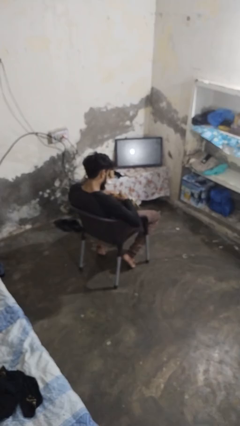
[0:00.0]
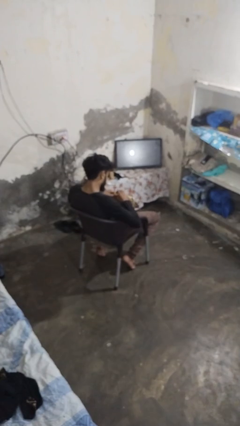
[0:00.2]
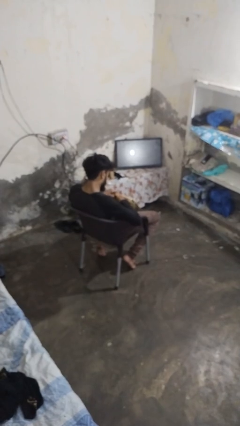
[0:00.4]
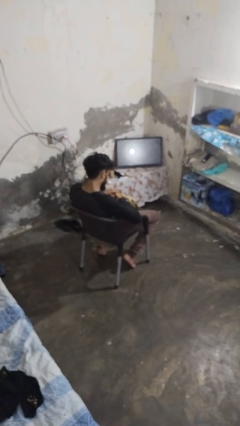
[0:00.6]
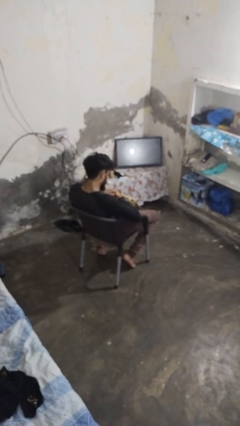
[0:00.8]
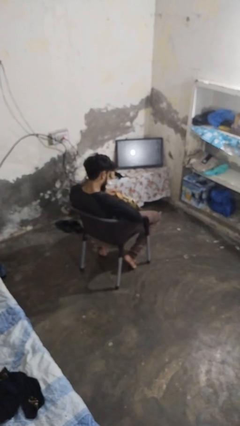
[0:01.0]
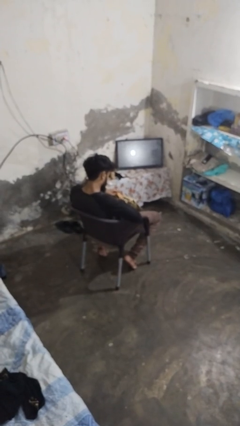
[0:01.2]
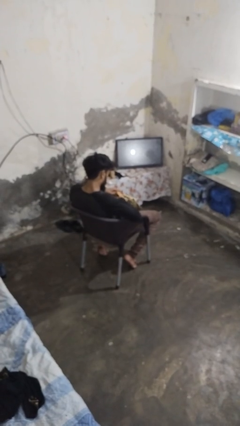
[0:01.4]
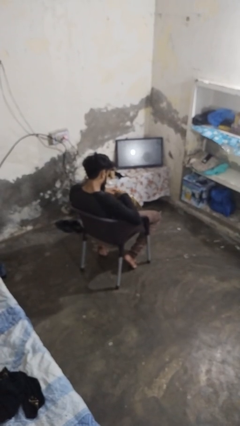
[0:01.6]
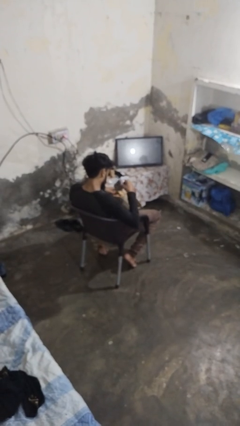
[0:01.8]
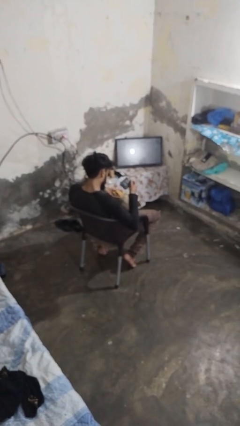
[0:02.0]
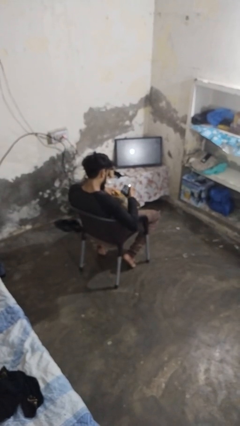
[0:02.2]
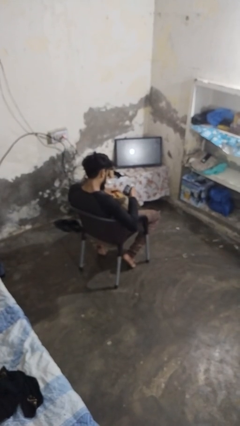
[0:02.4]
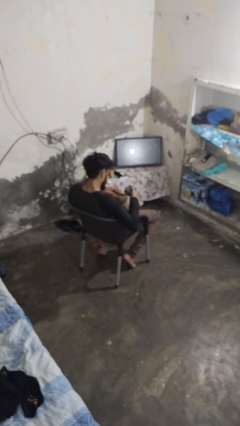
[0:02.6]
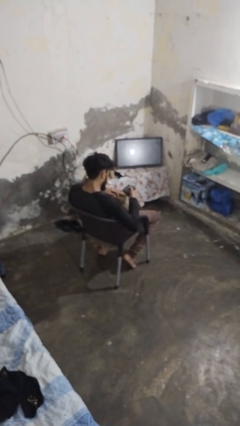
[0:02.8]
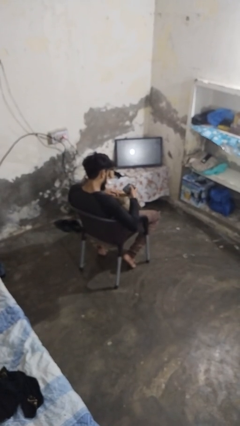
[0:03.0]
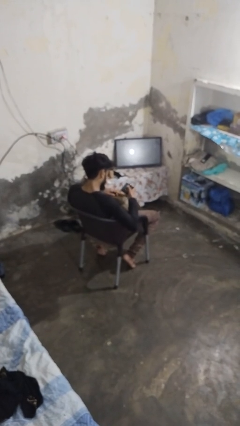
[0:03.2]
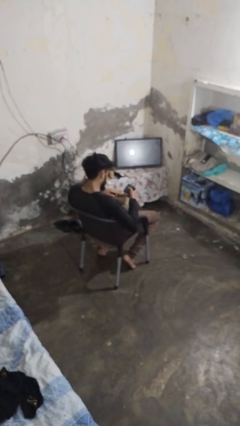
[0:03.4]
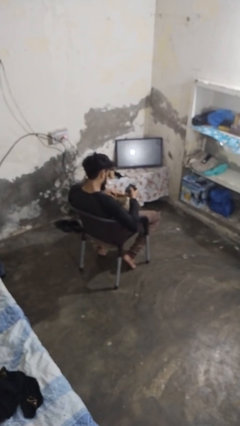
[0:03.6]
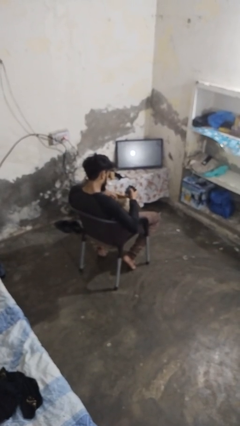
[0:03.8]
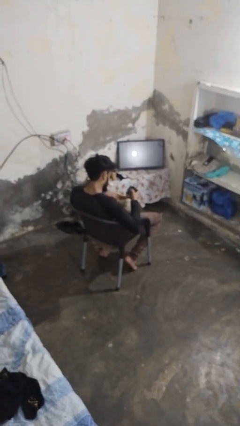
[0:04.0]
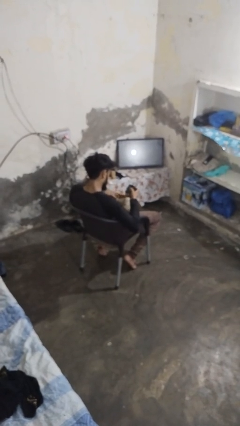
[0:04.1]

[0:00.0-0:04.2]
person takes object from purse

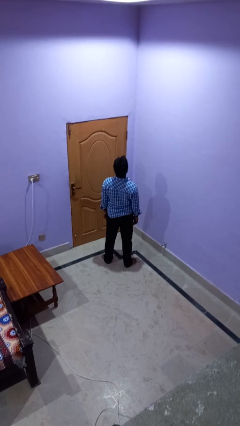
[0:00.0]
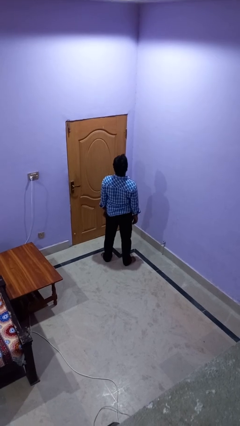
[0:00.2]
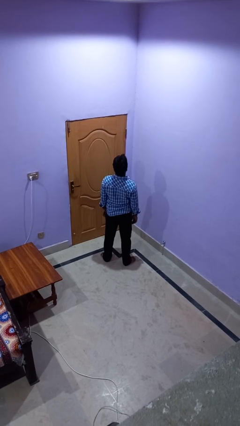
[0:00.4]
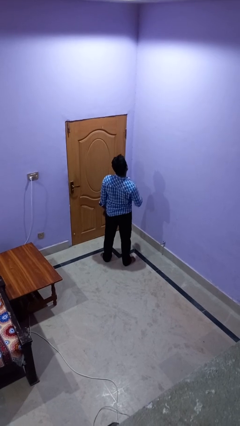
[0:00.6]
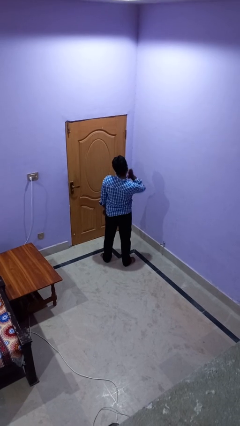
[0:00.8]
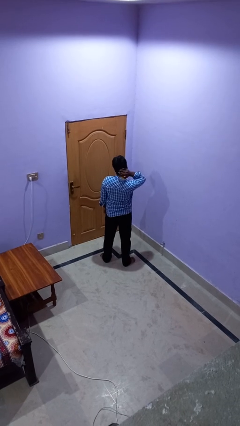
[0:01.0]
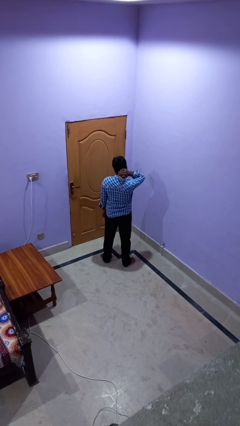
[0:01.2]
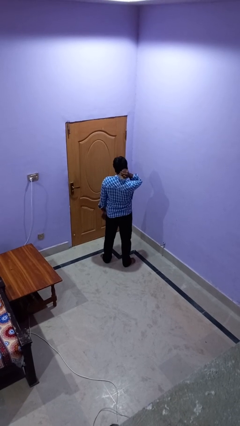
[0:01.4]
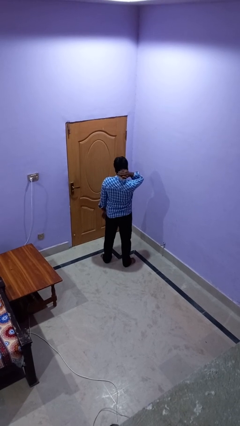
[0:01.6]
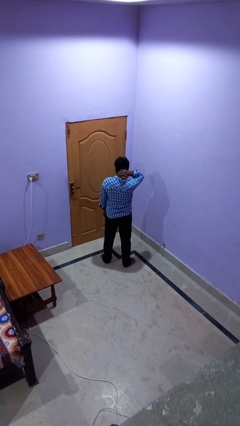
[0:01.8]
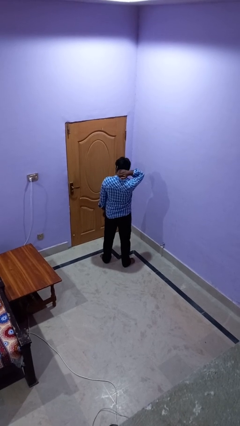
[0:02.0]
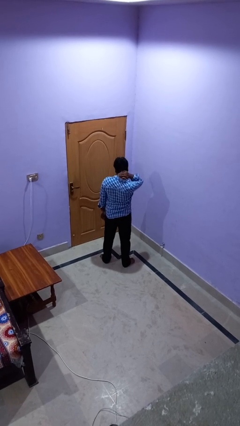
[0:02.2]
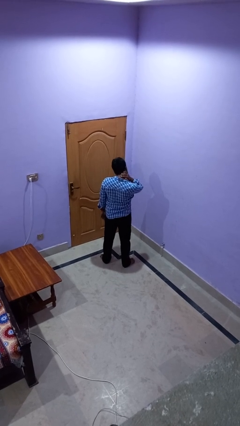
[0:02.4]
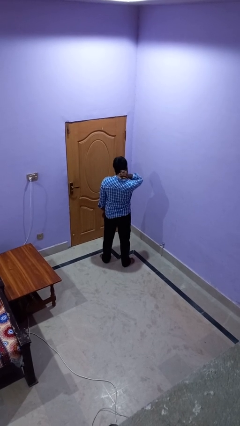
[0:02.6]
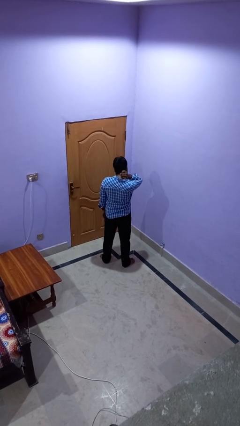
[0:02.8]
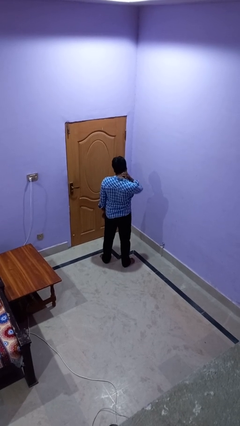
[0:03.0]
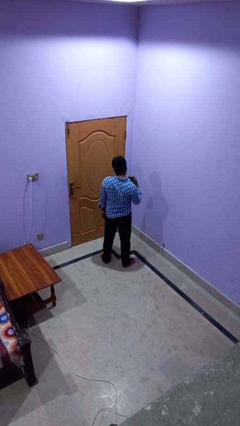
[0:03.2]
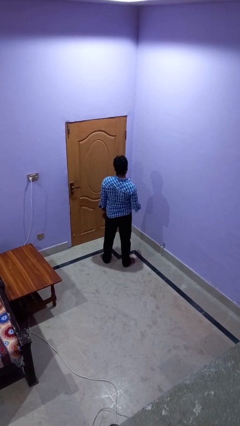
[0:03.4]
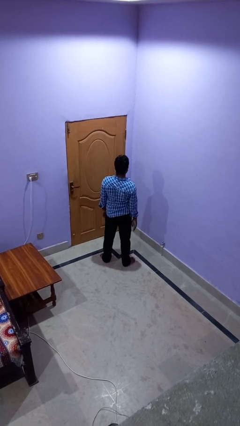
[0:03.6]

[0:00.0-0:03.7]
person rubs neck

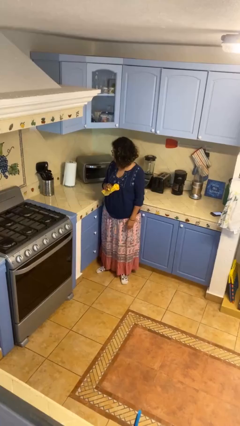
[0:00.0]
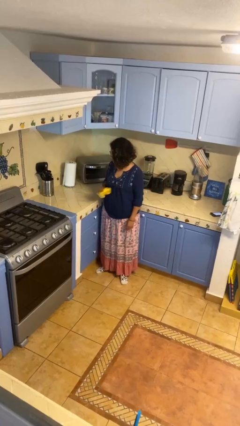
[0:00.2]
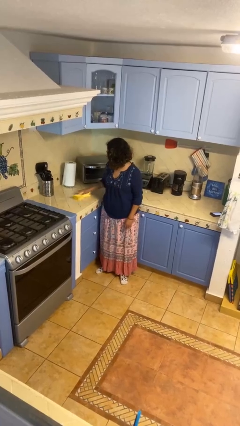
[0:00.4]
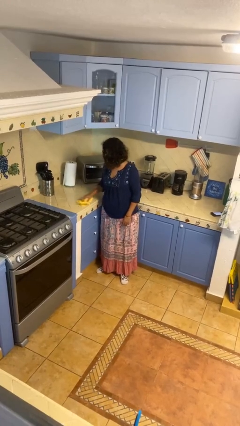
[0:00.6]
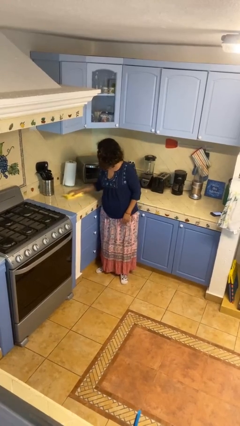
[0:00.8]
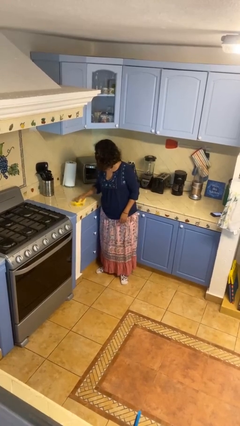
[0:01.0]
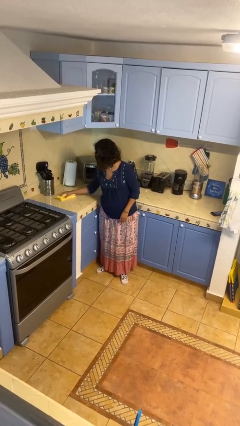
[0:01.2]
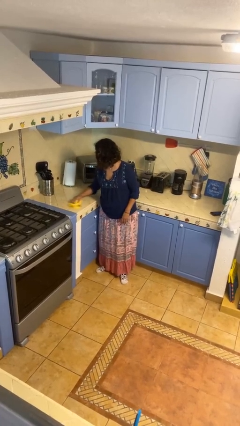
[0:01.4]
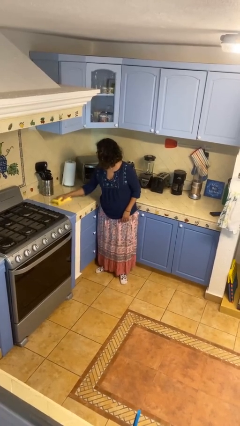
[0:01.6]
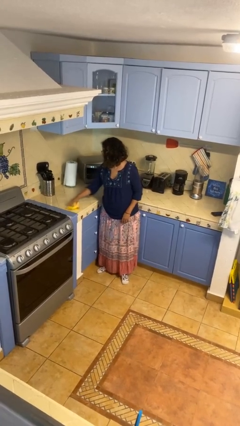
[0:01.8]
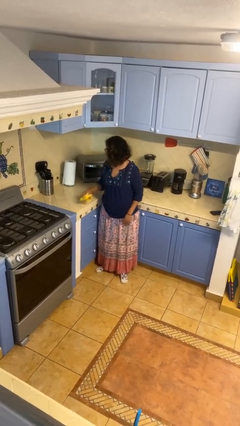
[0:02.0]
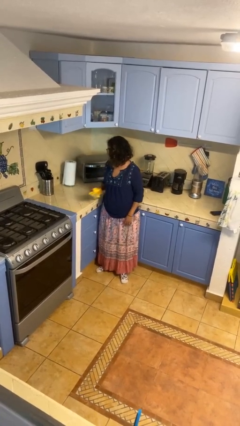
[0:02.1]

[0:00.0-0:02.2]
person cleans table with rag

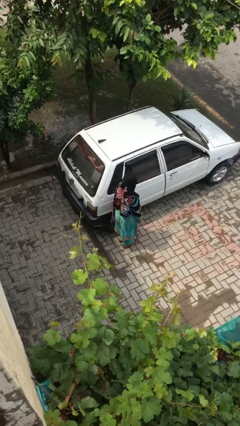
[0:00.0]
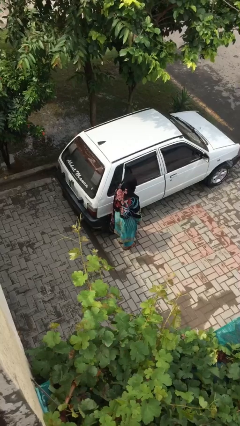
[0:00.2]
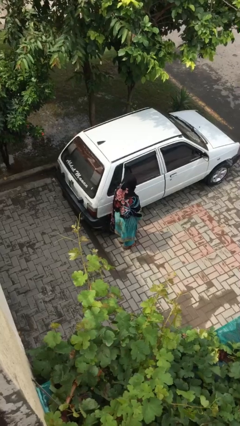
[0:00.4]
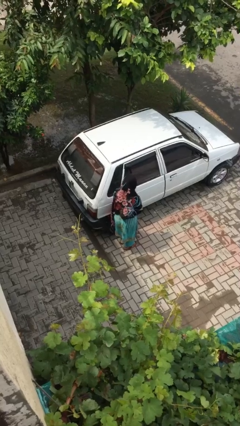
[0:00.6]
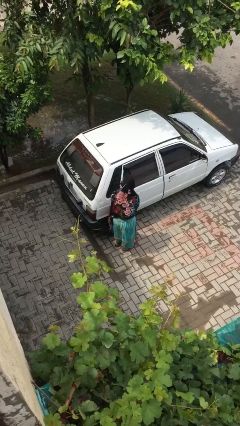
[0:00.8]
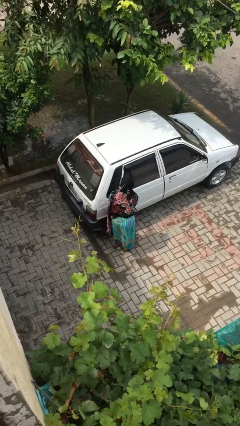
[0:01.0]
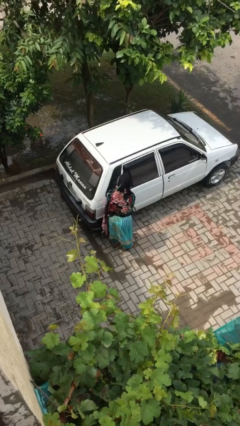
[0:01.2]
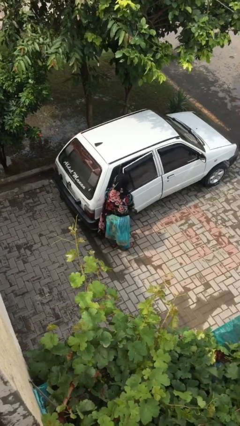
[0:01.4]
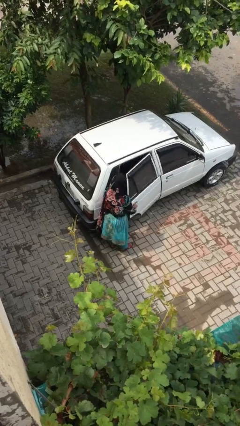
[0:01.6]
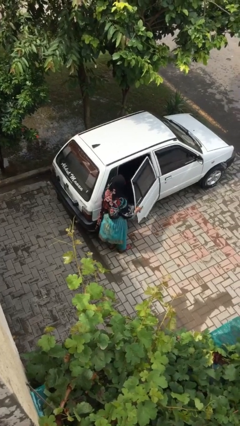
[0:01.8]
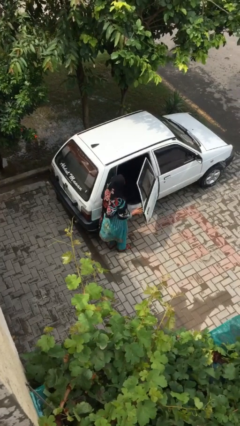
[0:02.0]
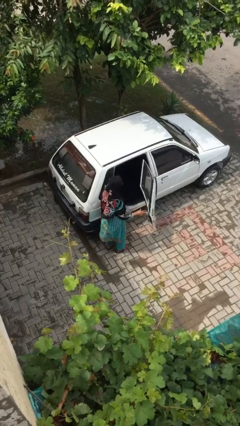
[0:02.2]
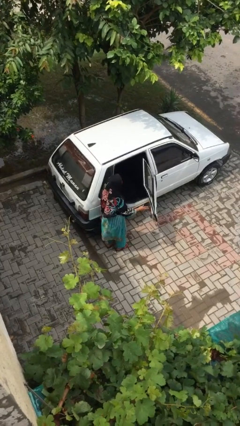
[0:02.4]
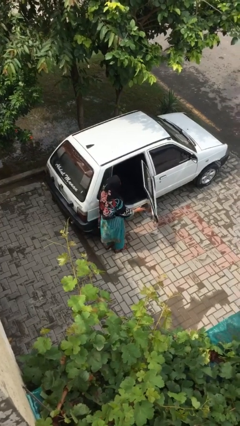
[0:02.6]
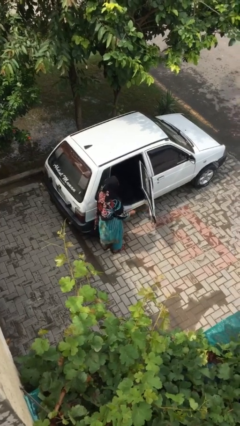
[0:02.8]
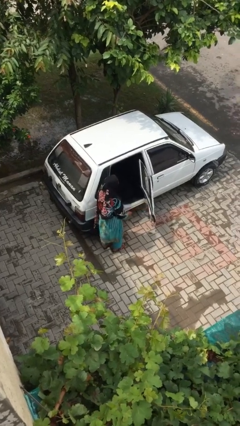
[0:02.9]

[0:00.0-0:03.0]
person opens car door

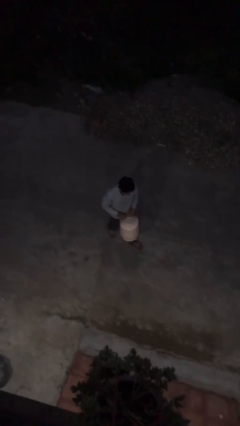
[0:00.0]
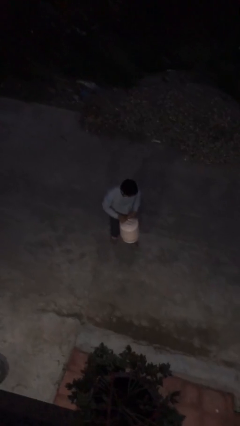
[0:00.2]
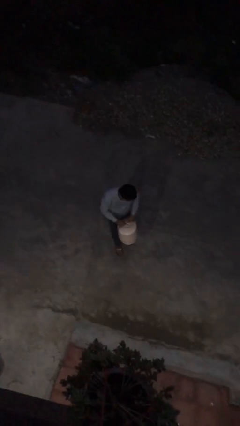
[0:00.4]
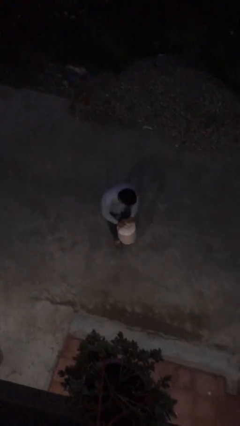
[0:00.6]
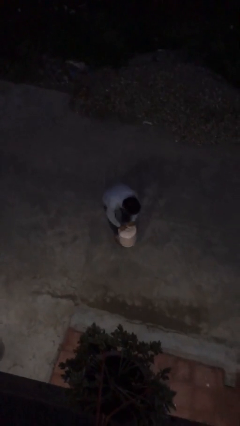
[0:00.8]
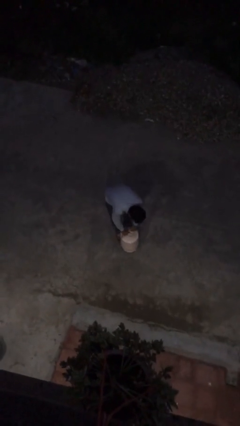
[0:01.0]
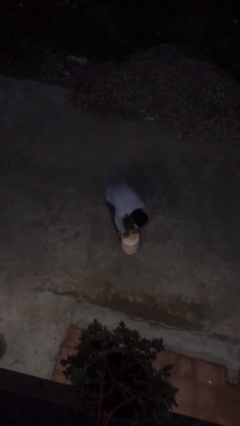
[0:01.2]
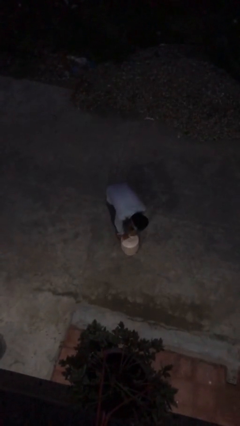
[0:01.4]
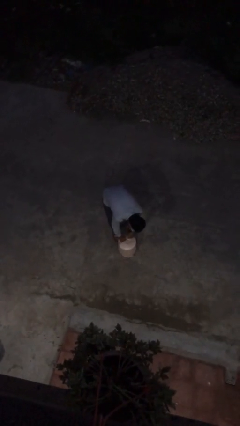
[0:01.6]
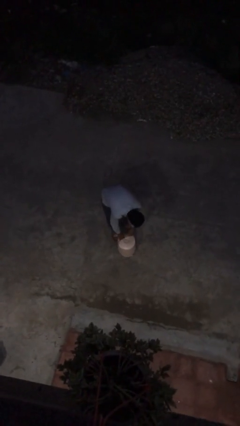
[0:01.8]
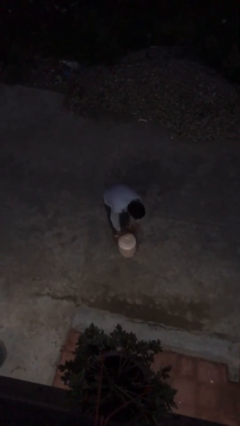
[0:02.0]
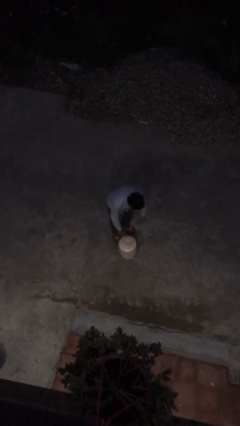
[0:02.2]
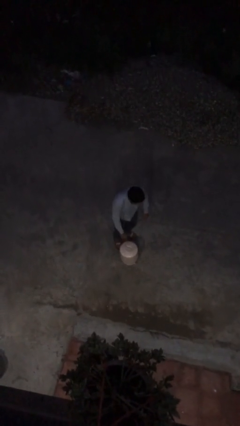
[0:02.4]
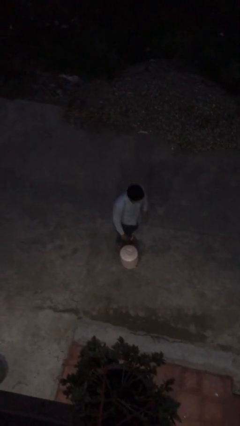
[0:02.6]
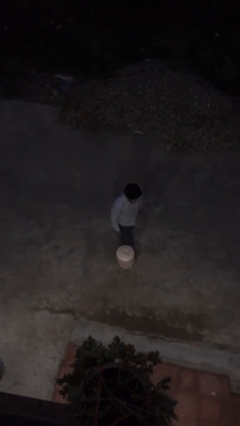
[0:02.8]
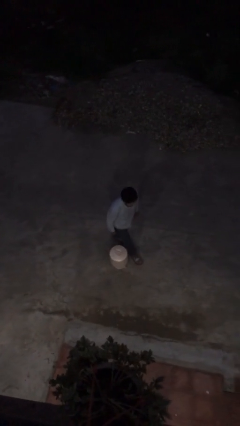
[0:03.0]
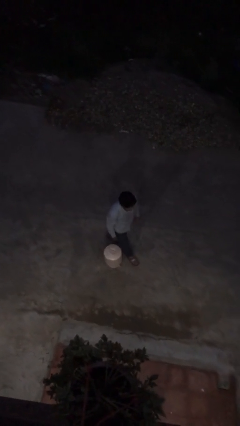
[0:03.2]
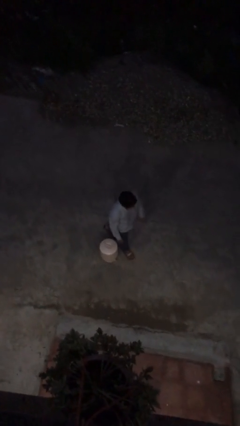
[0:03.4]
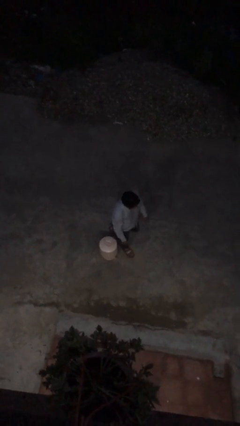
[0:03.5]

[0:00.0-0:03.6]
person puts down object on floor

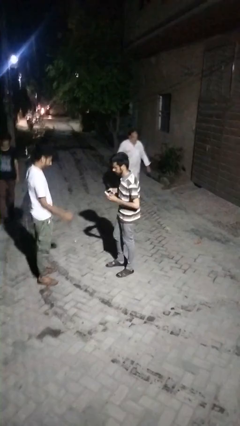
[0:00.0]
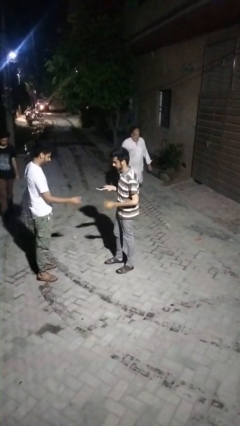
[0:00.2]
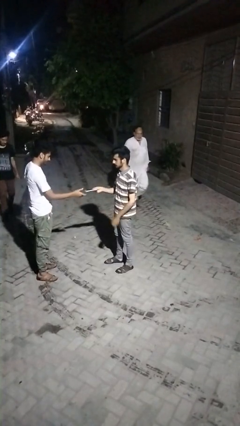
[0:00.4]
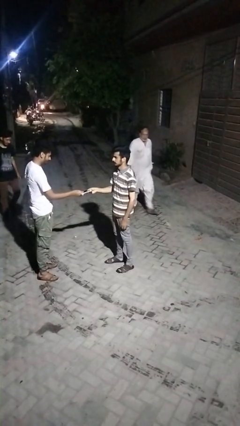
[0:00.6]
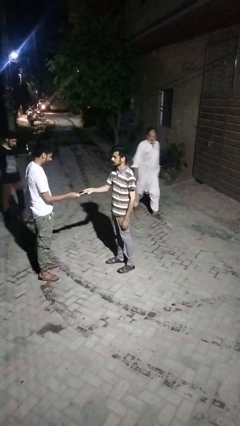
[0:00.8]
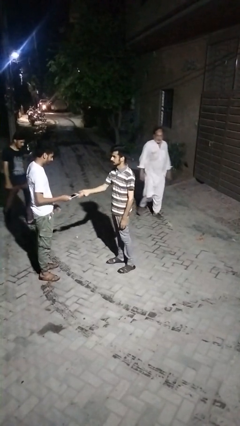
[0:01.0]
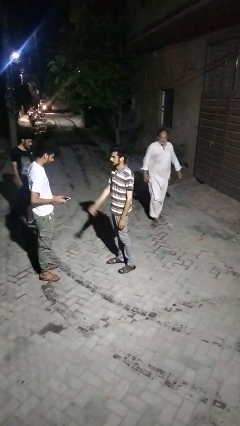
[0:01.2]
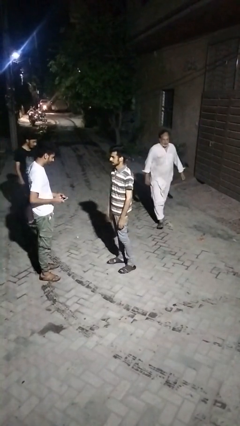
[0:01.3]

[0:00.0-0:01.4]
person transfers object to person
